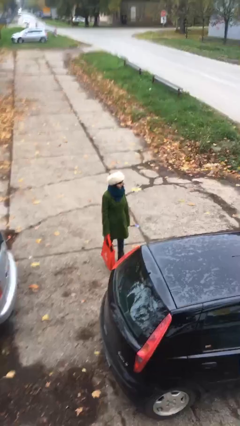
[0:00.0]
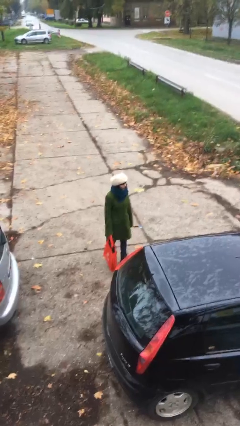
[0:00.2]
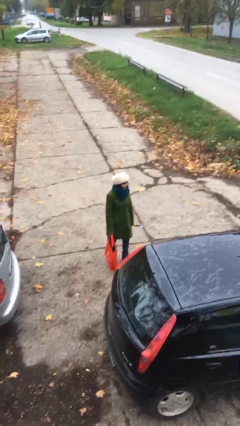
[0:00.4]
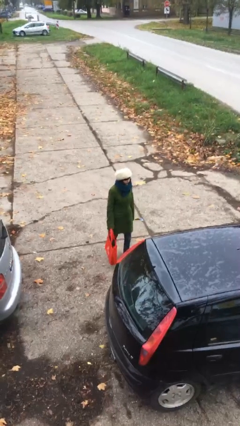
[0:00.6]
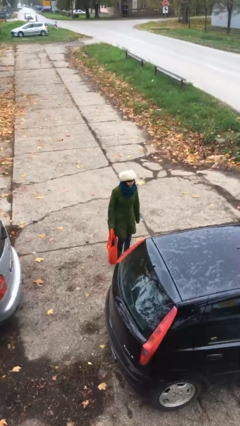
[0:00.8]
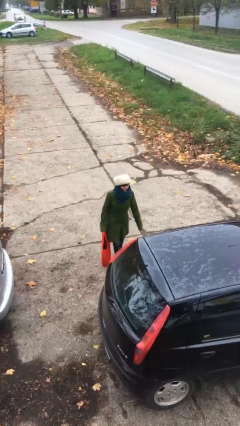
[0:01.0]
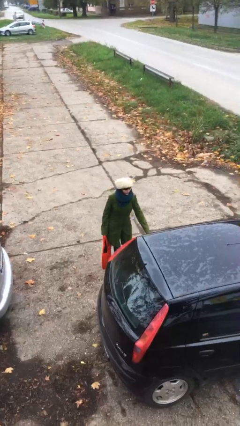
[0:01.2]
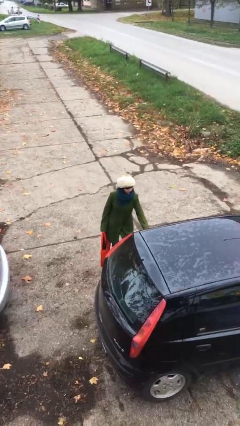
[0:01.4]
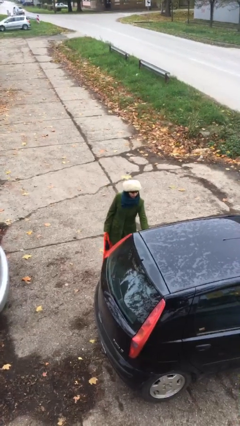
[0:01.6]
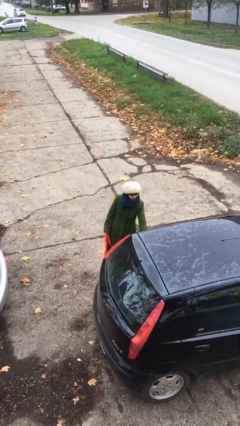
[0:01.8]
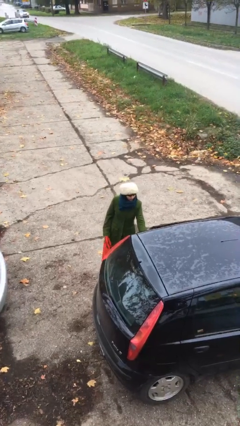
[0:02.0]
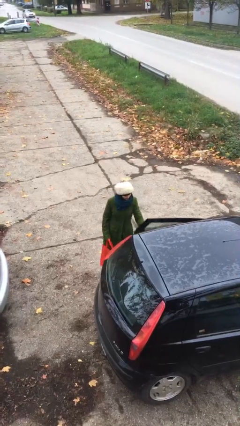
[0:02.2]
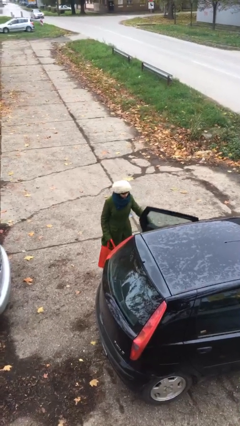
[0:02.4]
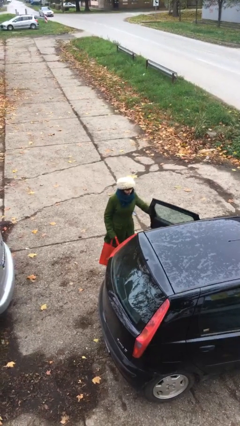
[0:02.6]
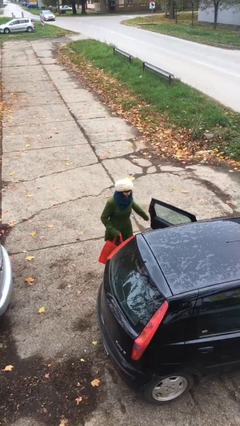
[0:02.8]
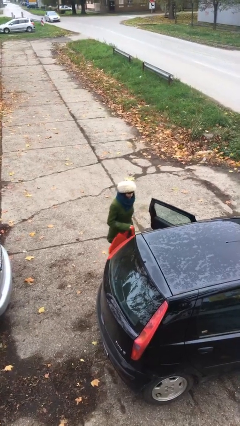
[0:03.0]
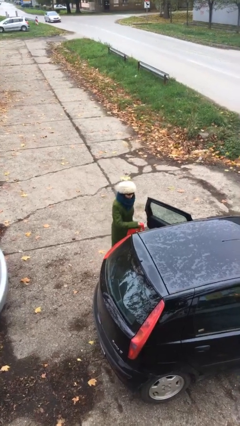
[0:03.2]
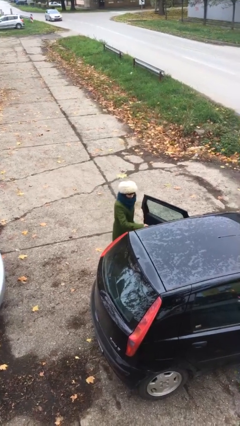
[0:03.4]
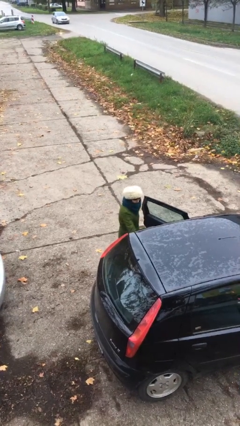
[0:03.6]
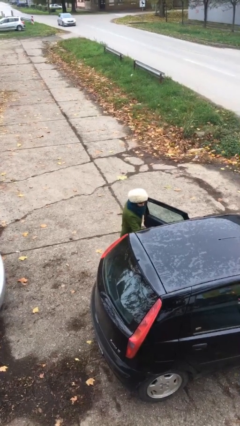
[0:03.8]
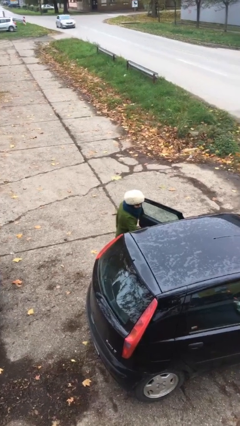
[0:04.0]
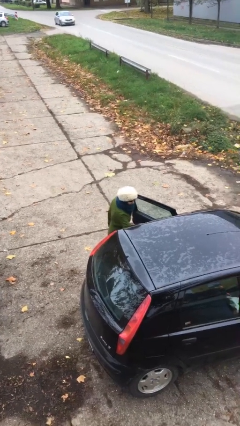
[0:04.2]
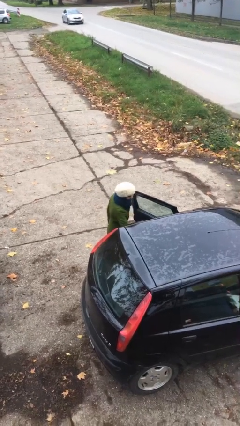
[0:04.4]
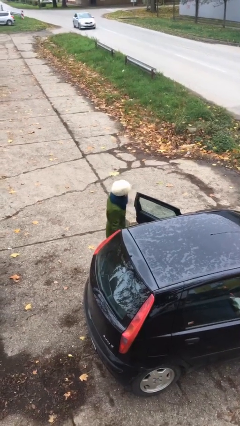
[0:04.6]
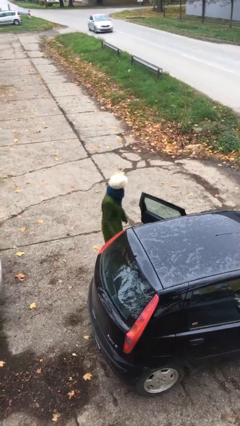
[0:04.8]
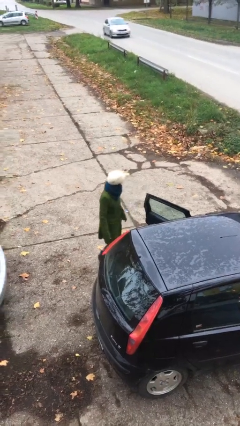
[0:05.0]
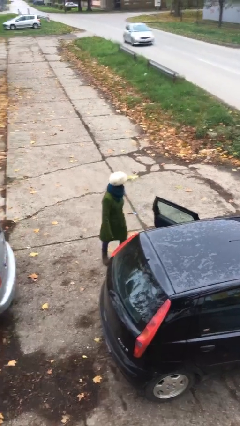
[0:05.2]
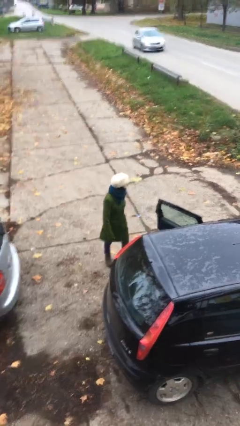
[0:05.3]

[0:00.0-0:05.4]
person loads car

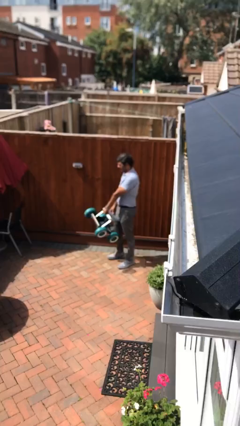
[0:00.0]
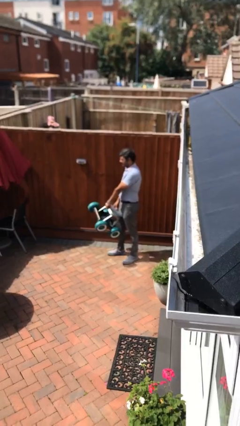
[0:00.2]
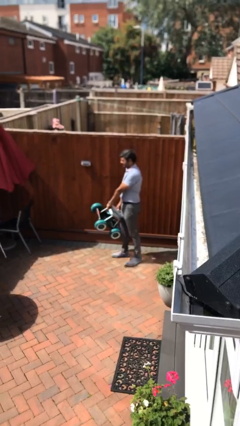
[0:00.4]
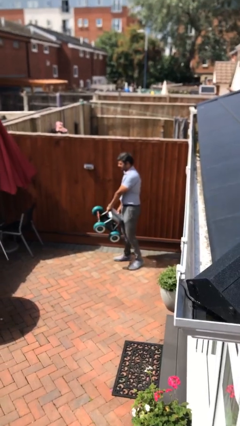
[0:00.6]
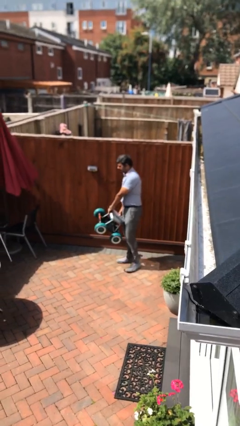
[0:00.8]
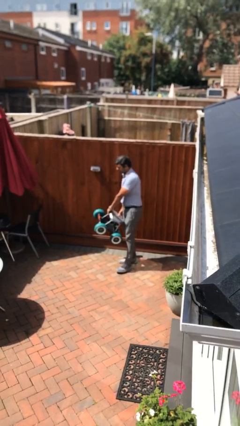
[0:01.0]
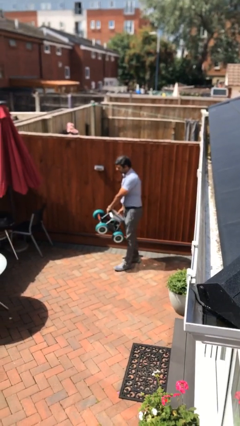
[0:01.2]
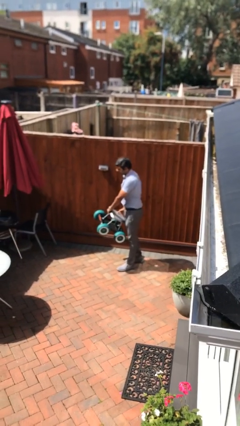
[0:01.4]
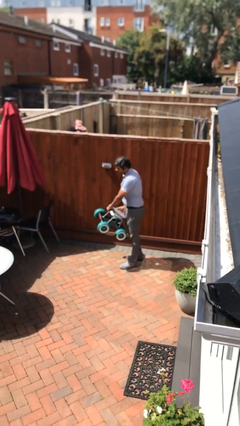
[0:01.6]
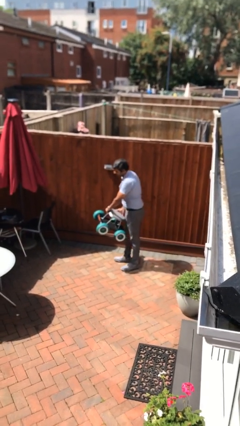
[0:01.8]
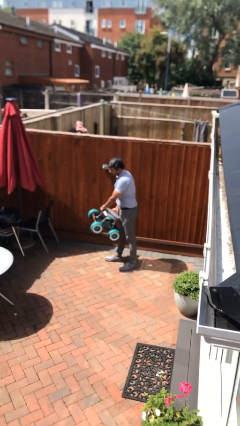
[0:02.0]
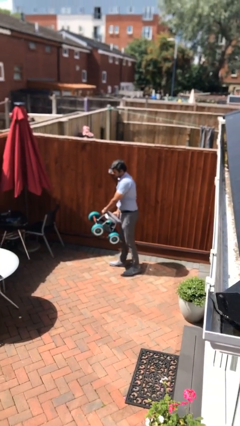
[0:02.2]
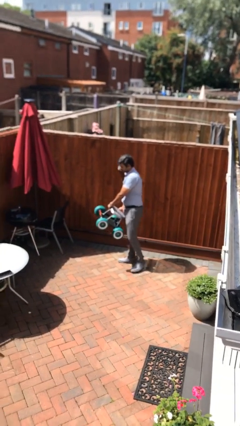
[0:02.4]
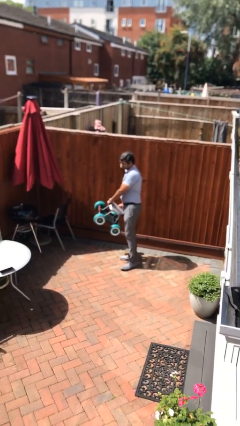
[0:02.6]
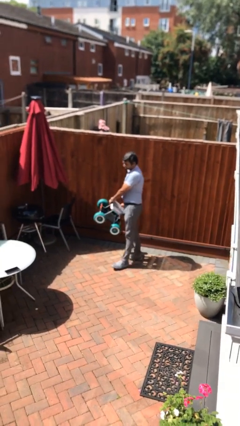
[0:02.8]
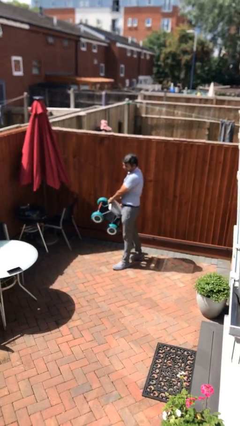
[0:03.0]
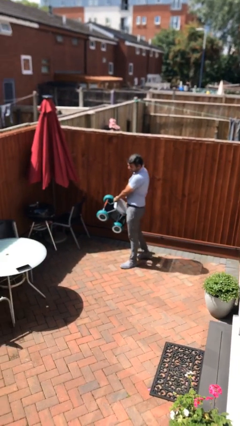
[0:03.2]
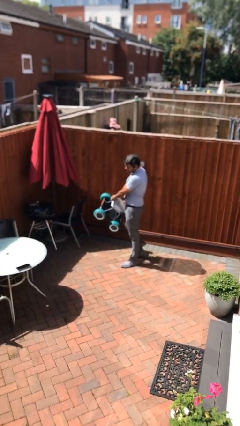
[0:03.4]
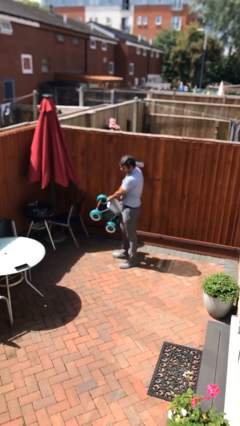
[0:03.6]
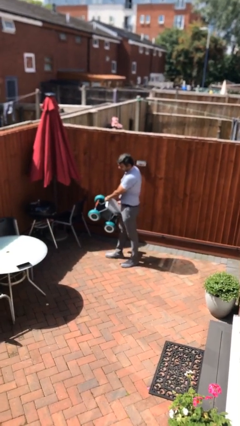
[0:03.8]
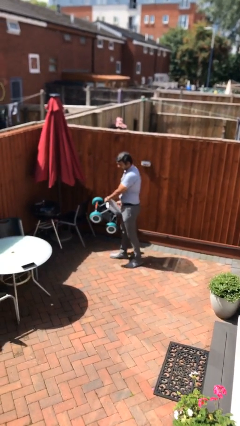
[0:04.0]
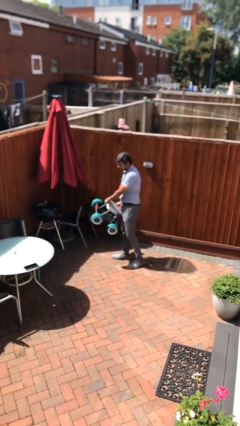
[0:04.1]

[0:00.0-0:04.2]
person carries heavy object

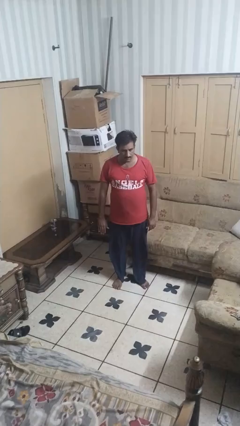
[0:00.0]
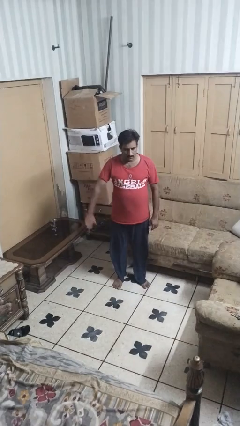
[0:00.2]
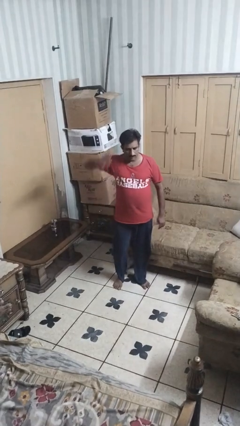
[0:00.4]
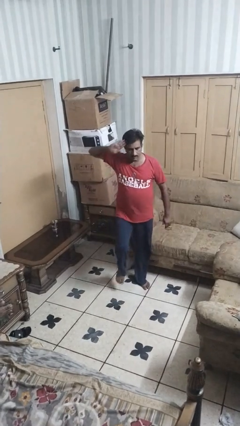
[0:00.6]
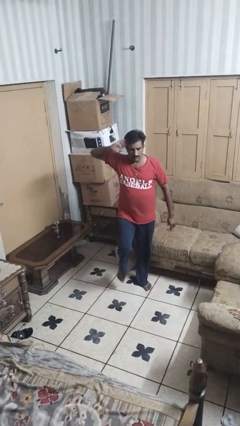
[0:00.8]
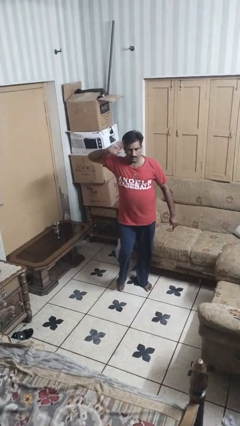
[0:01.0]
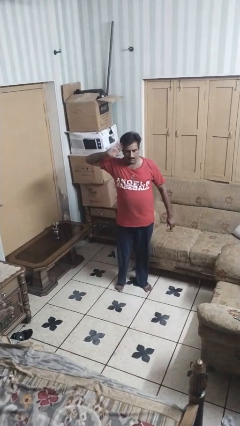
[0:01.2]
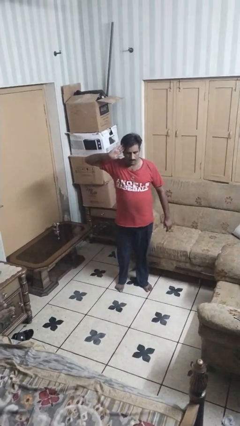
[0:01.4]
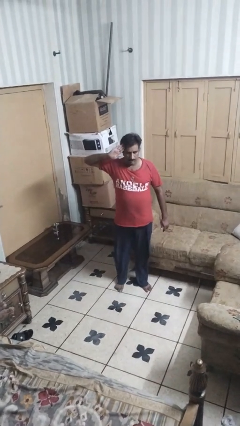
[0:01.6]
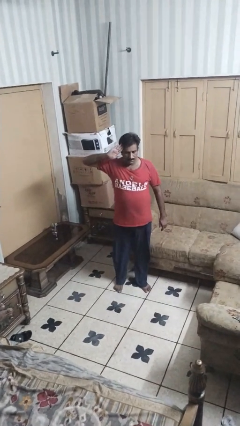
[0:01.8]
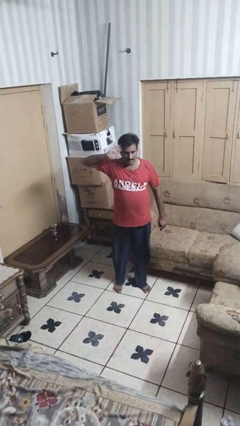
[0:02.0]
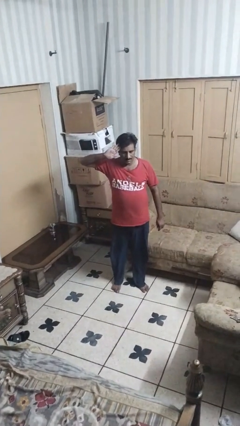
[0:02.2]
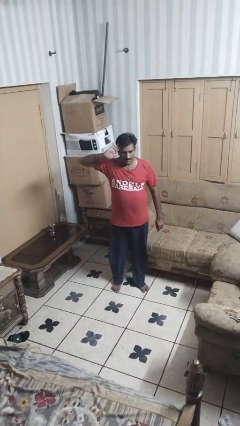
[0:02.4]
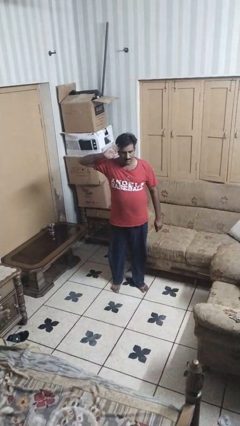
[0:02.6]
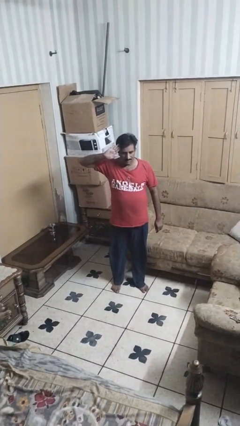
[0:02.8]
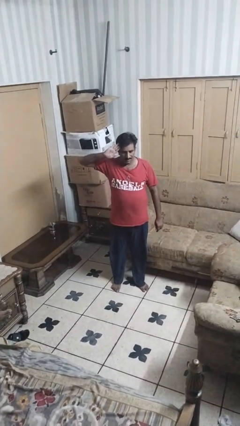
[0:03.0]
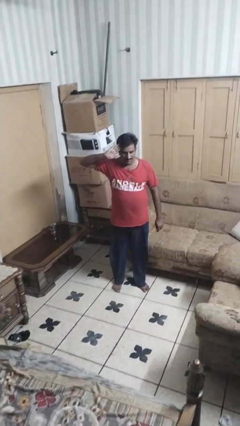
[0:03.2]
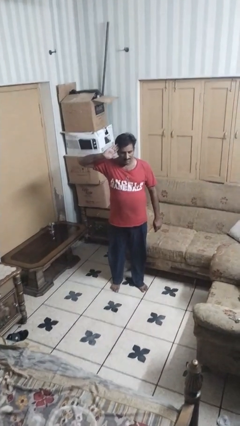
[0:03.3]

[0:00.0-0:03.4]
person salutes

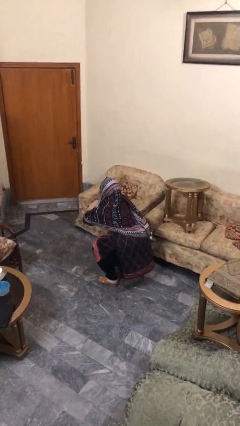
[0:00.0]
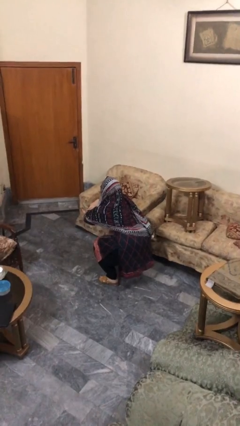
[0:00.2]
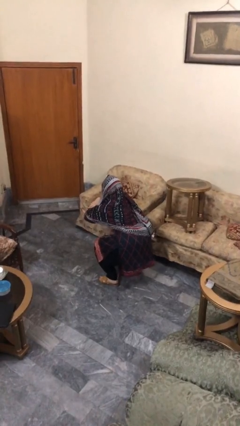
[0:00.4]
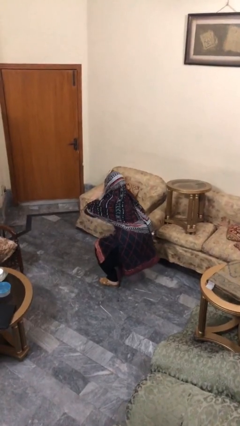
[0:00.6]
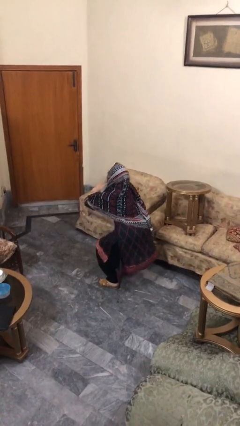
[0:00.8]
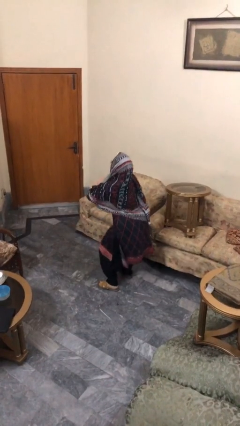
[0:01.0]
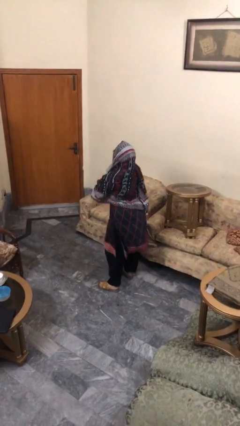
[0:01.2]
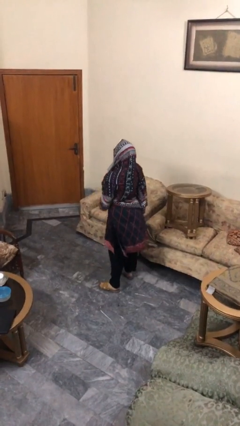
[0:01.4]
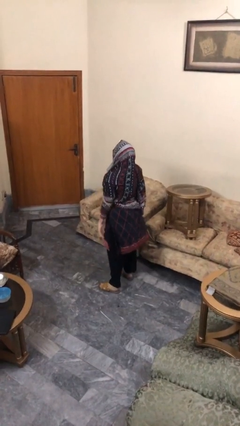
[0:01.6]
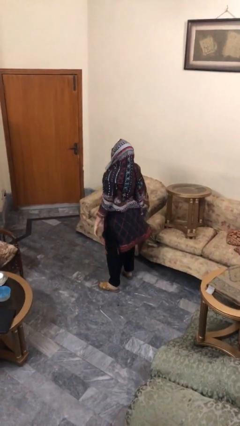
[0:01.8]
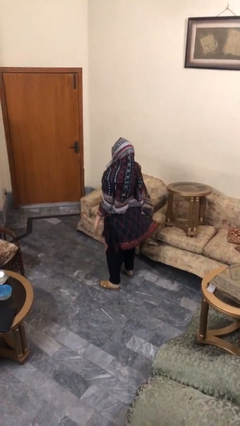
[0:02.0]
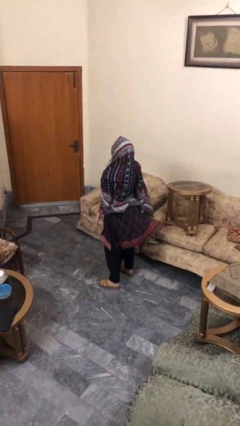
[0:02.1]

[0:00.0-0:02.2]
person stands up

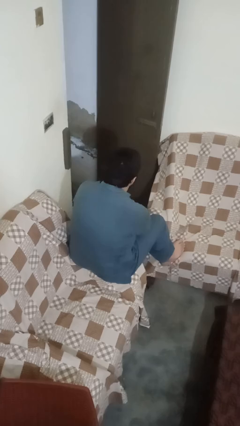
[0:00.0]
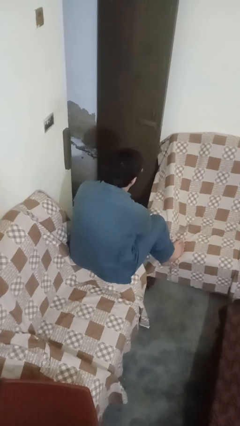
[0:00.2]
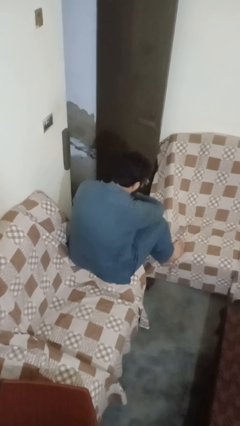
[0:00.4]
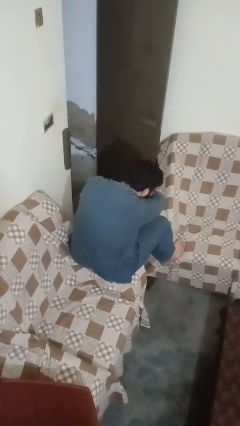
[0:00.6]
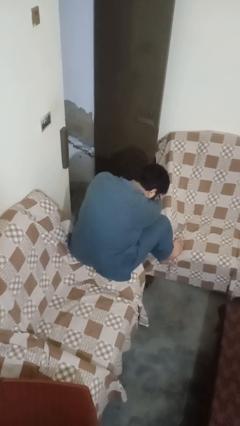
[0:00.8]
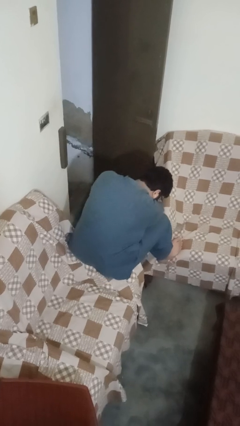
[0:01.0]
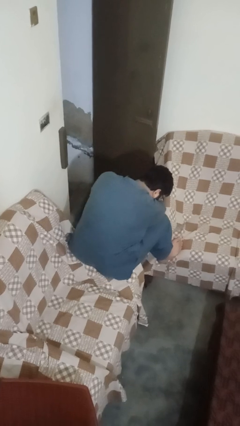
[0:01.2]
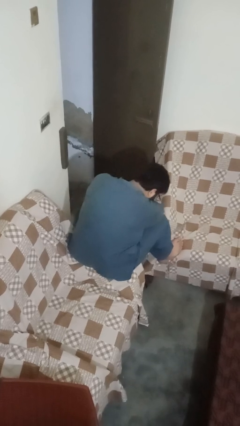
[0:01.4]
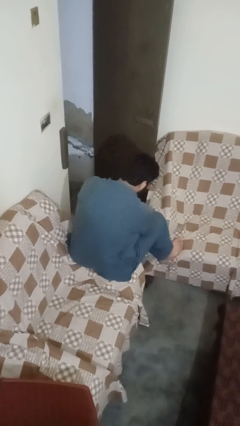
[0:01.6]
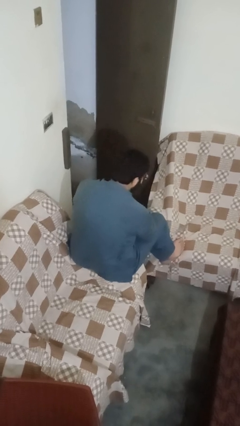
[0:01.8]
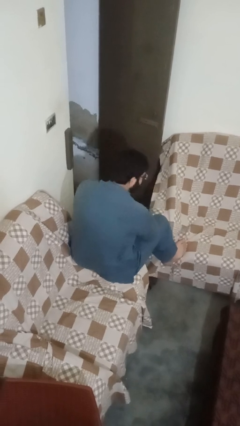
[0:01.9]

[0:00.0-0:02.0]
person sneezes into arm
